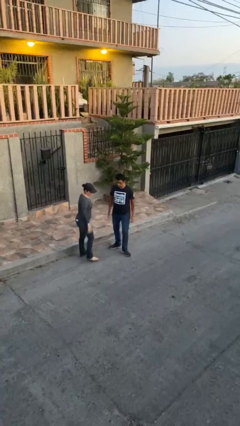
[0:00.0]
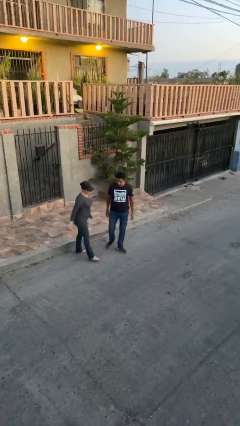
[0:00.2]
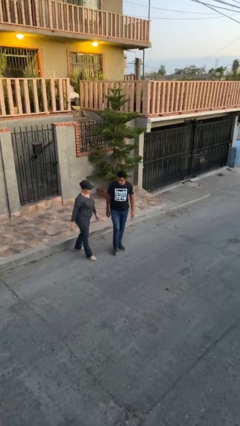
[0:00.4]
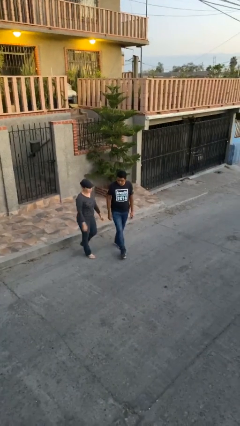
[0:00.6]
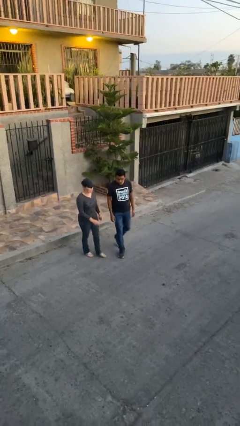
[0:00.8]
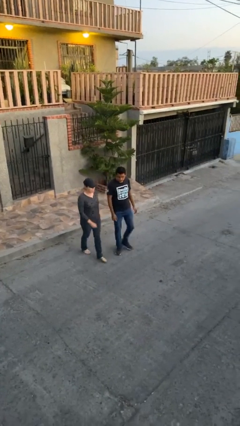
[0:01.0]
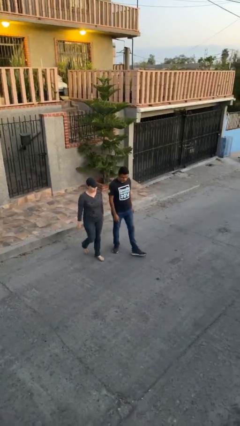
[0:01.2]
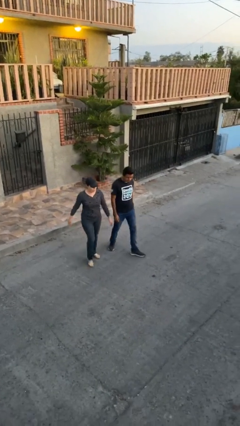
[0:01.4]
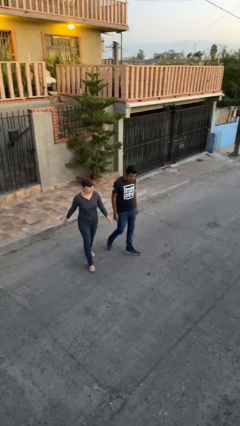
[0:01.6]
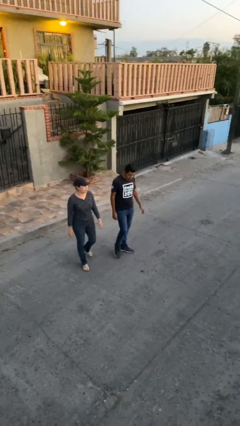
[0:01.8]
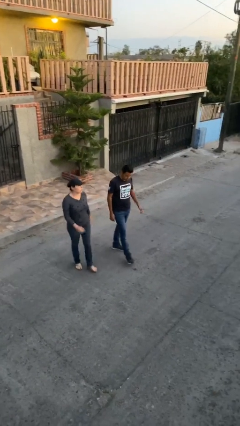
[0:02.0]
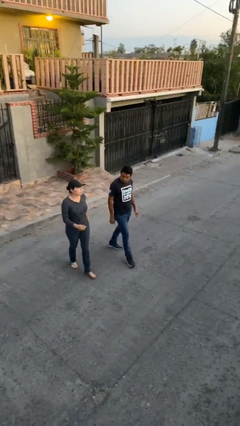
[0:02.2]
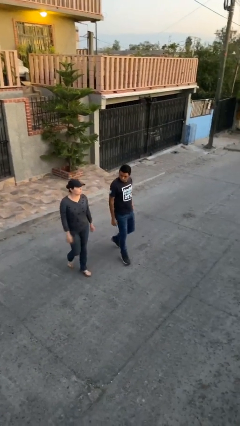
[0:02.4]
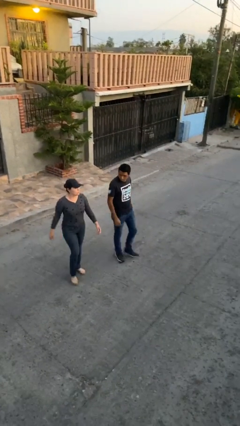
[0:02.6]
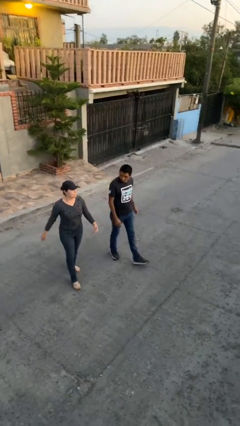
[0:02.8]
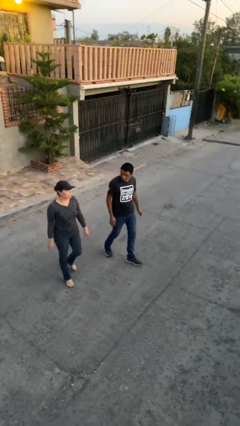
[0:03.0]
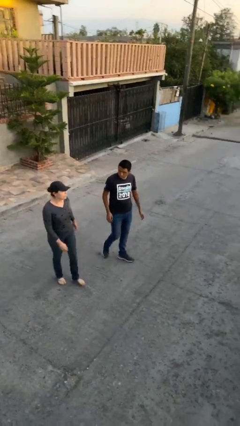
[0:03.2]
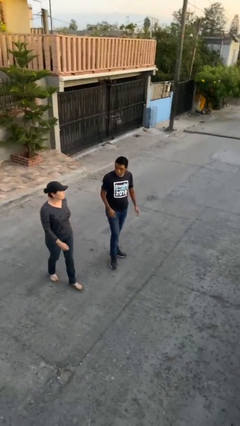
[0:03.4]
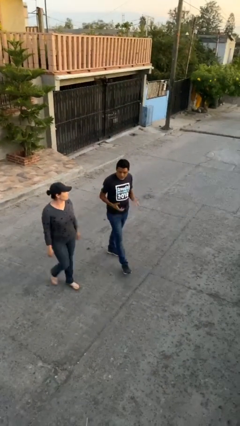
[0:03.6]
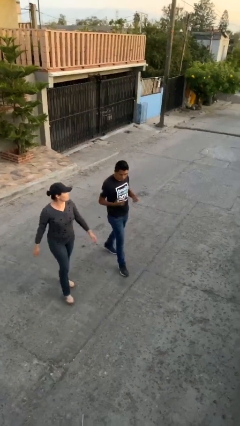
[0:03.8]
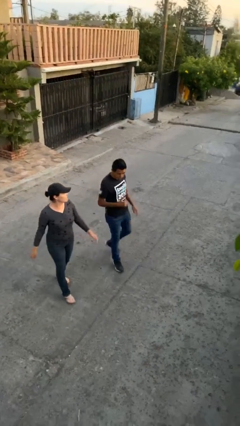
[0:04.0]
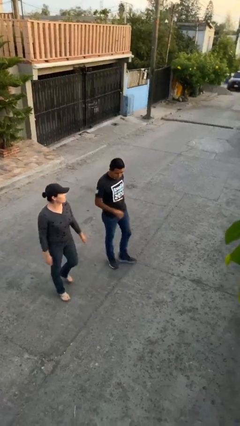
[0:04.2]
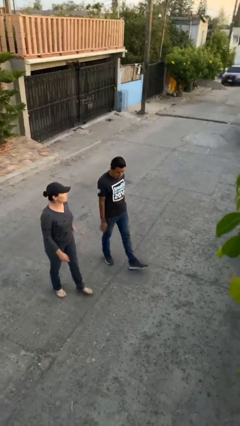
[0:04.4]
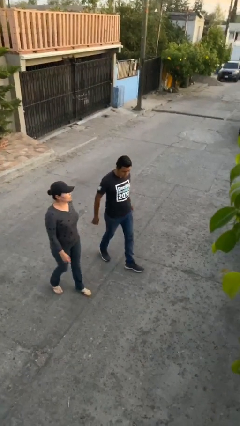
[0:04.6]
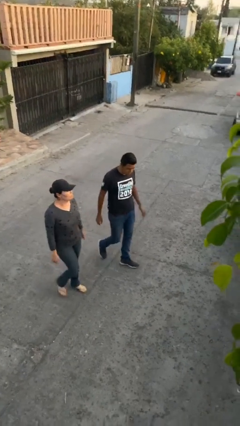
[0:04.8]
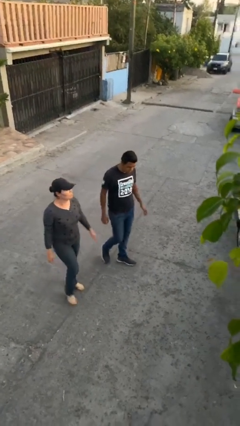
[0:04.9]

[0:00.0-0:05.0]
person talks to person

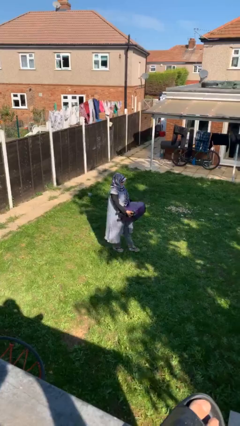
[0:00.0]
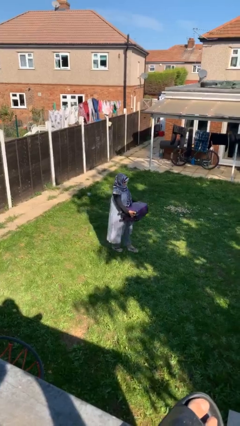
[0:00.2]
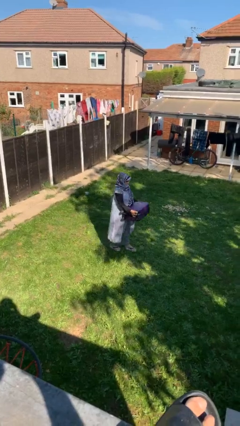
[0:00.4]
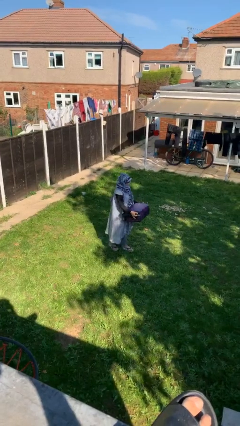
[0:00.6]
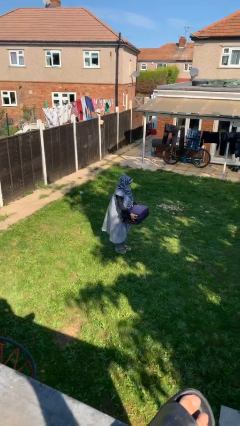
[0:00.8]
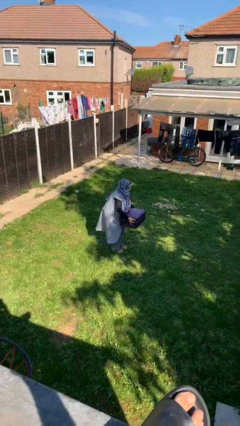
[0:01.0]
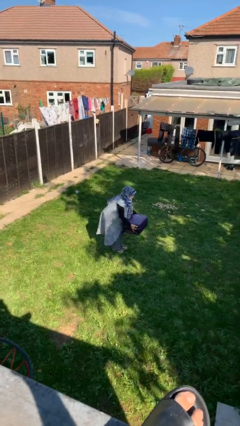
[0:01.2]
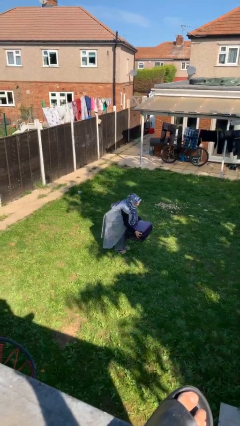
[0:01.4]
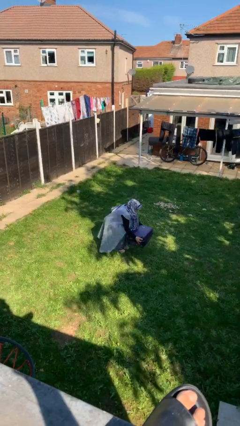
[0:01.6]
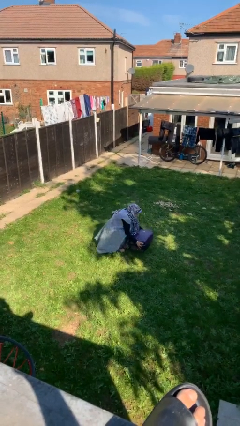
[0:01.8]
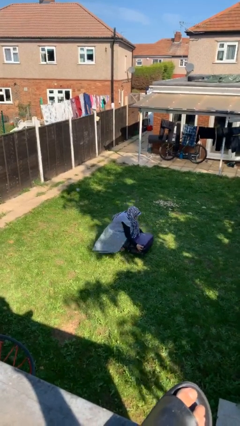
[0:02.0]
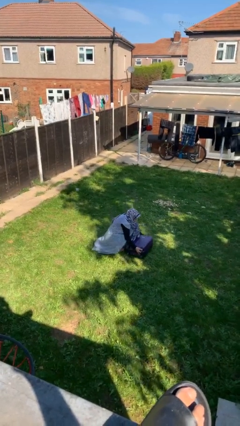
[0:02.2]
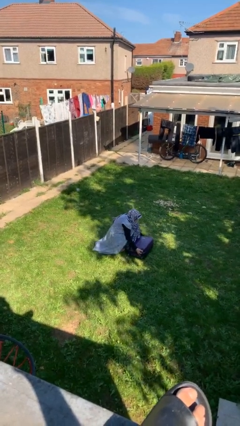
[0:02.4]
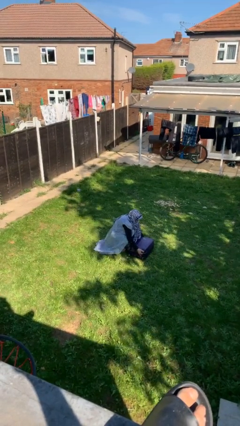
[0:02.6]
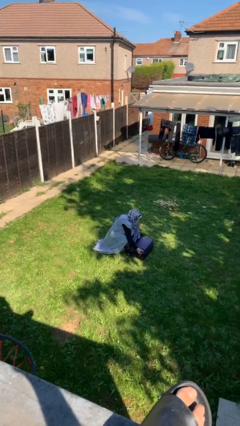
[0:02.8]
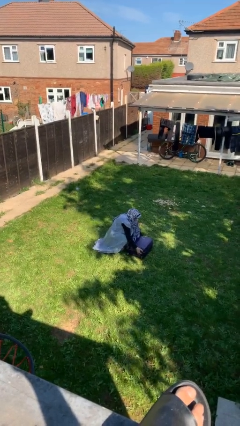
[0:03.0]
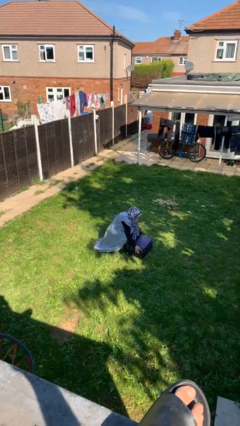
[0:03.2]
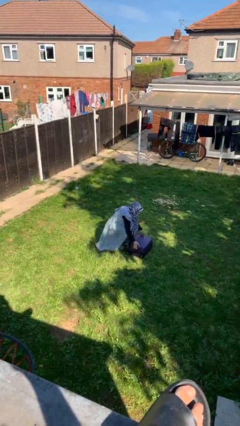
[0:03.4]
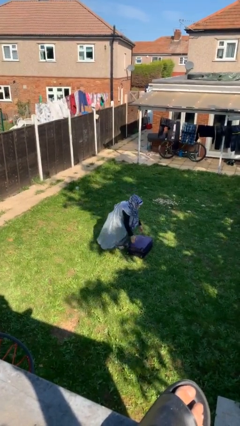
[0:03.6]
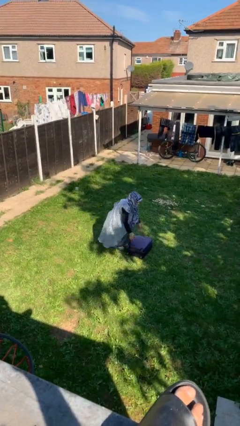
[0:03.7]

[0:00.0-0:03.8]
person puts down object on floor

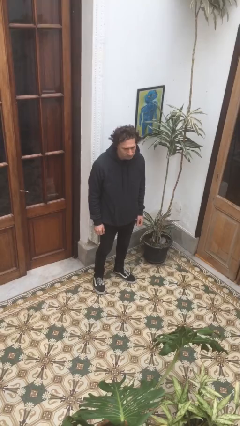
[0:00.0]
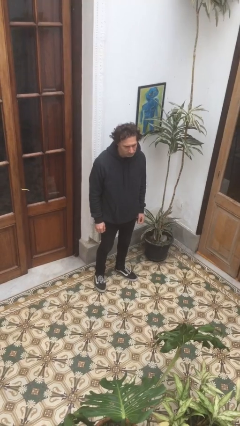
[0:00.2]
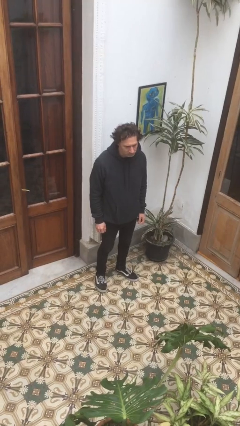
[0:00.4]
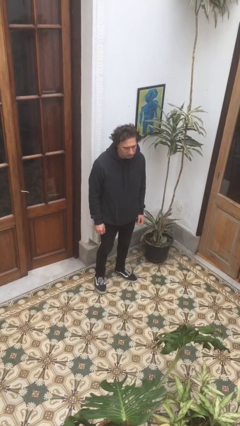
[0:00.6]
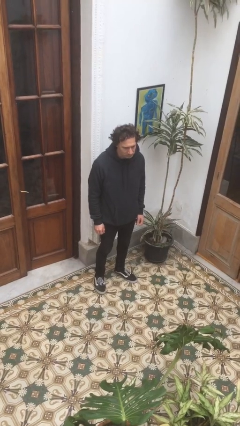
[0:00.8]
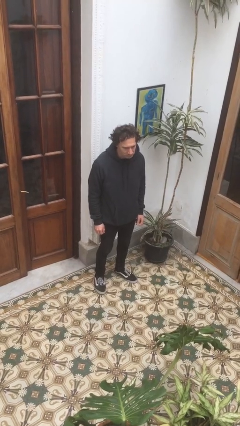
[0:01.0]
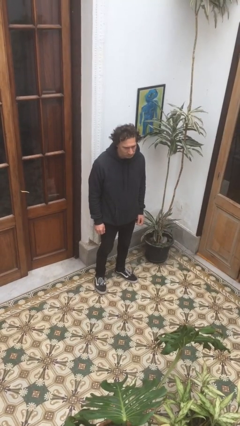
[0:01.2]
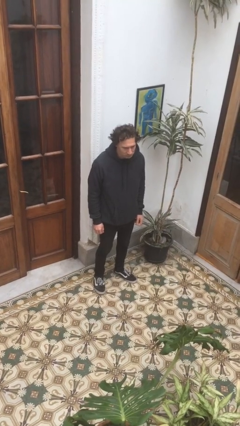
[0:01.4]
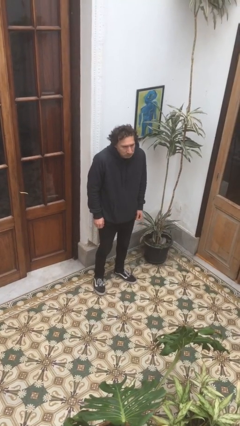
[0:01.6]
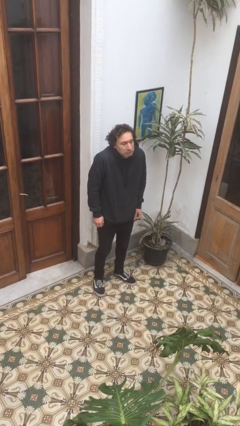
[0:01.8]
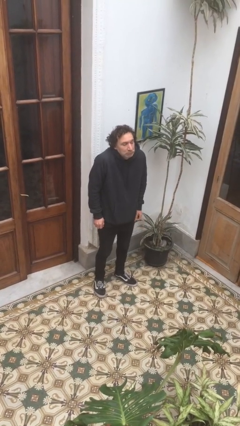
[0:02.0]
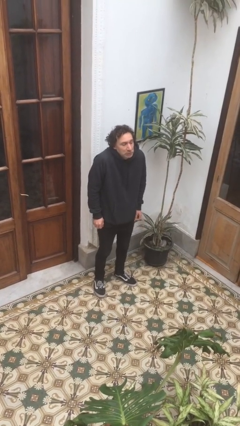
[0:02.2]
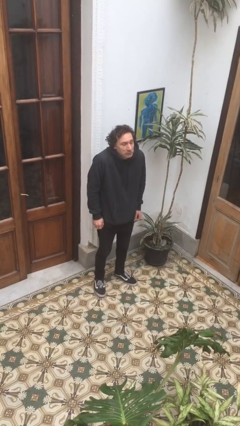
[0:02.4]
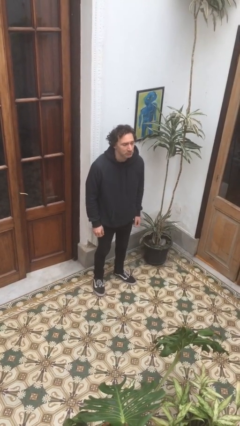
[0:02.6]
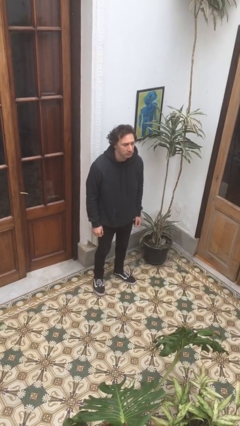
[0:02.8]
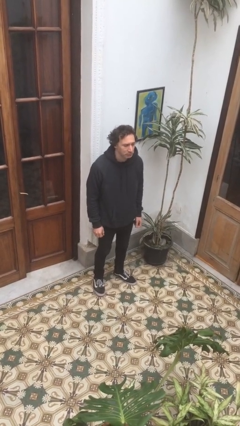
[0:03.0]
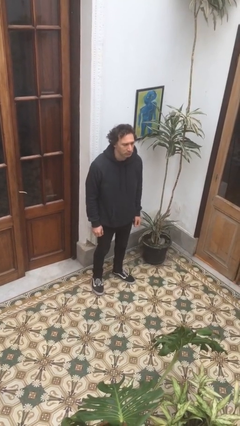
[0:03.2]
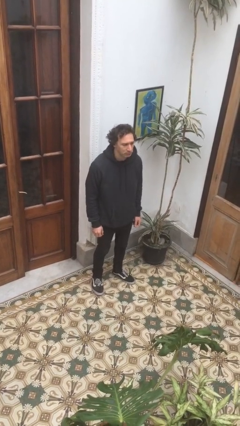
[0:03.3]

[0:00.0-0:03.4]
person shrugs

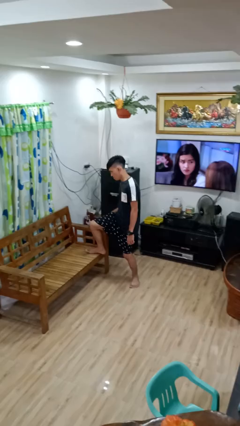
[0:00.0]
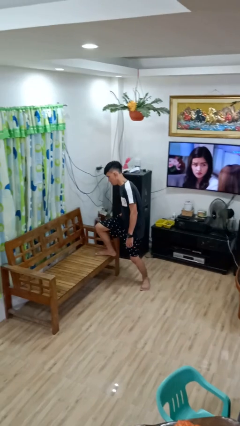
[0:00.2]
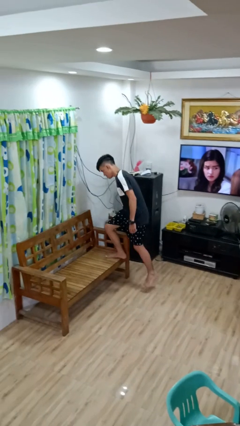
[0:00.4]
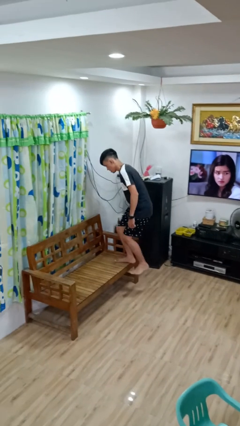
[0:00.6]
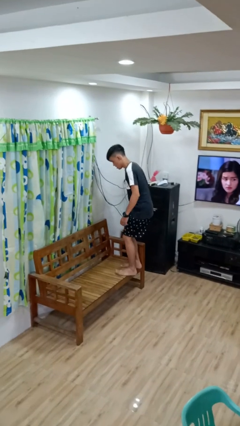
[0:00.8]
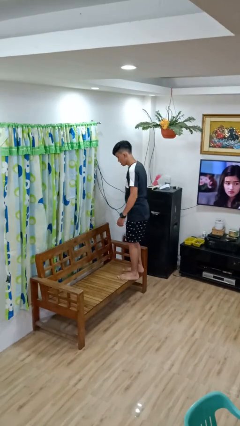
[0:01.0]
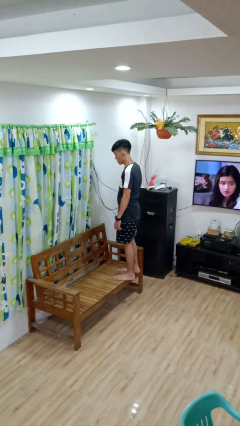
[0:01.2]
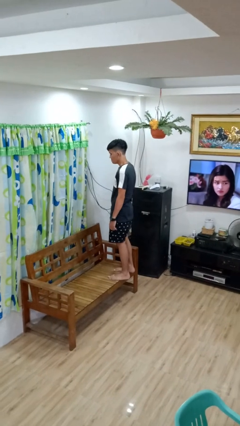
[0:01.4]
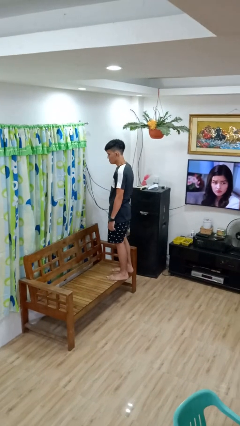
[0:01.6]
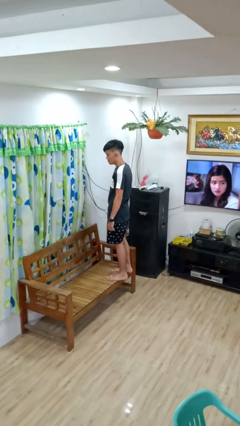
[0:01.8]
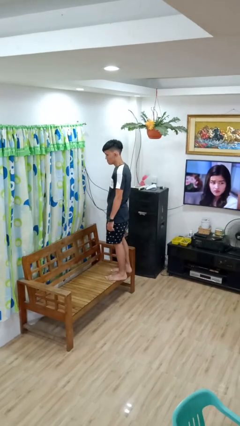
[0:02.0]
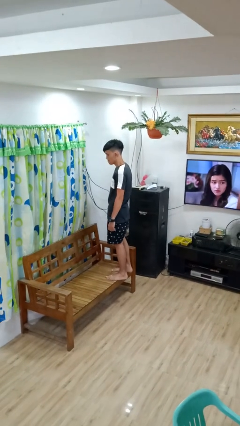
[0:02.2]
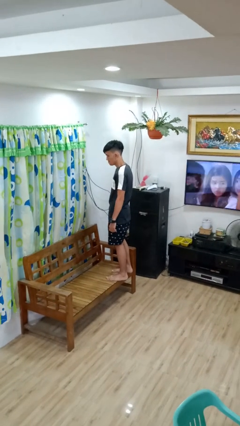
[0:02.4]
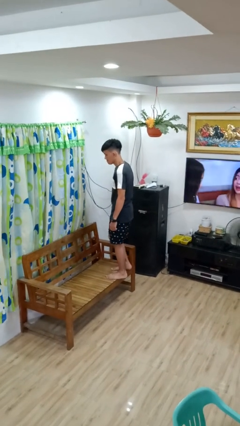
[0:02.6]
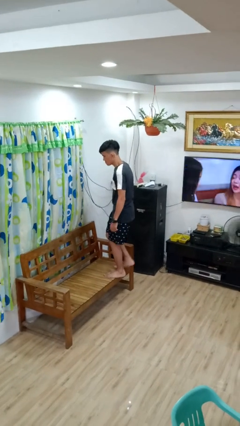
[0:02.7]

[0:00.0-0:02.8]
person climbs on couch

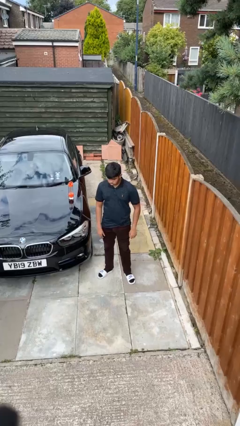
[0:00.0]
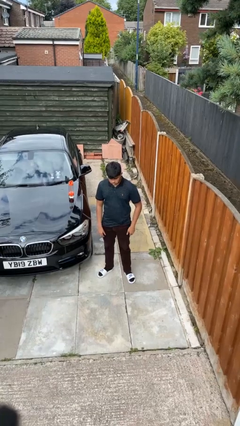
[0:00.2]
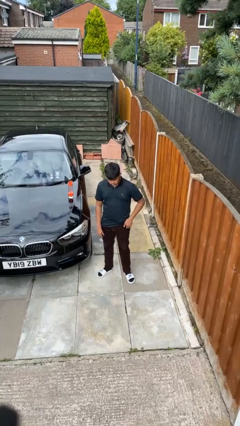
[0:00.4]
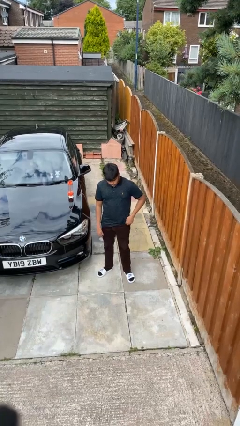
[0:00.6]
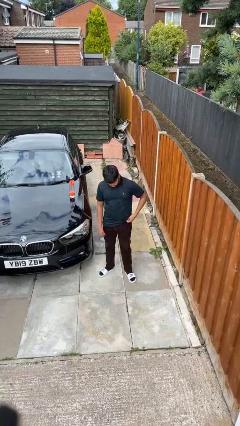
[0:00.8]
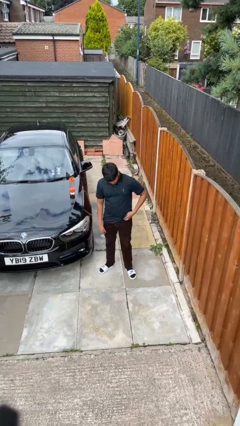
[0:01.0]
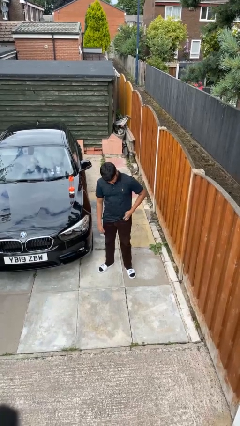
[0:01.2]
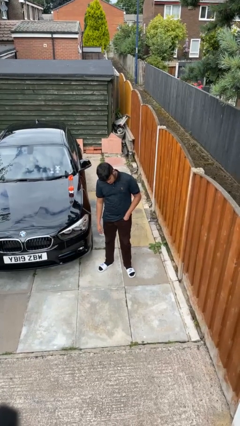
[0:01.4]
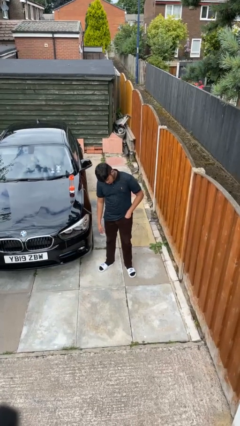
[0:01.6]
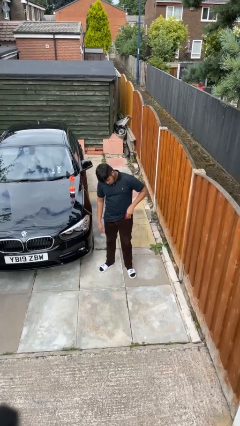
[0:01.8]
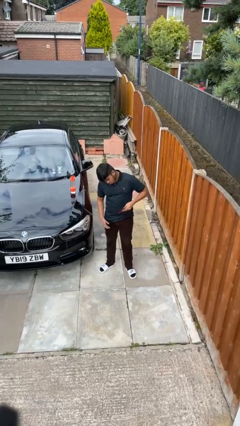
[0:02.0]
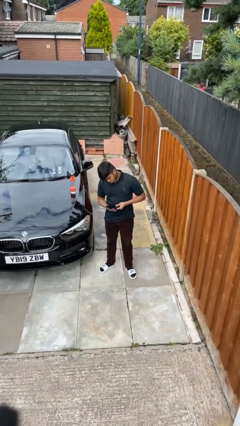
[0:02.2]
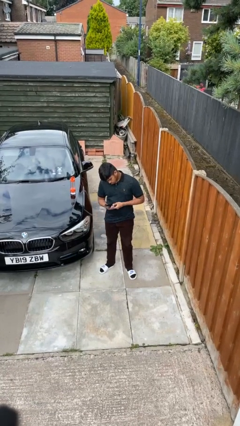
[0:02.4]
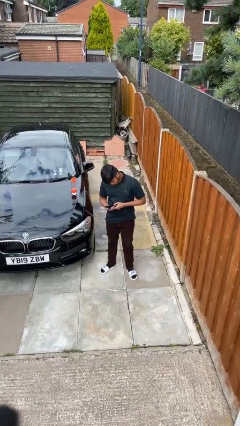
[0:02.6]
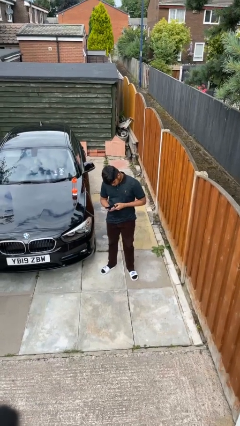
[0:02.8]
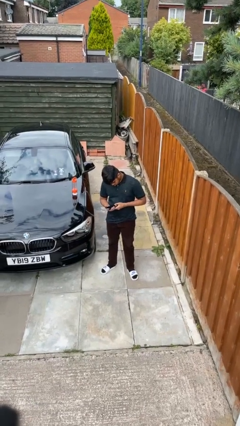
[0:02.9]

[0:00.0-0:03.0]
person takes phone from pocket
